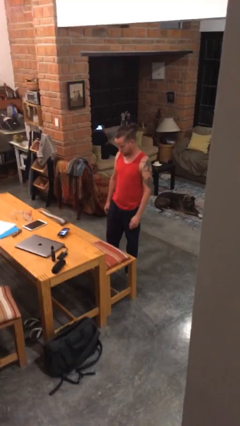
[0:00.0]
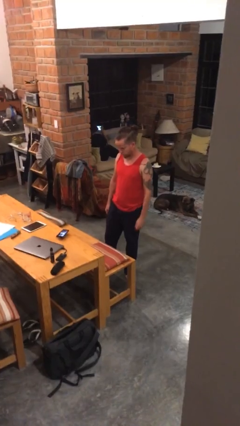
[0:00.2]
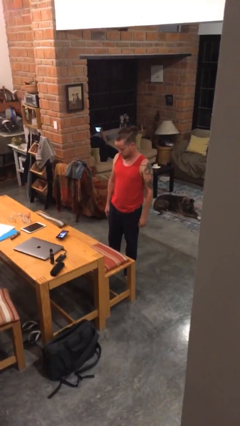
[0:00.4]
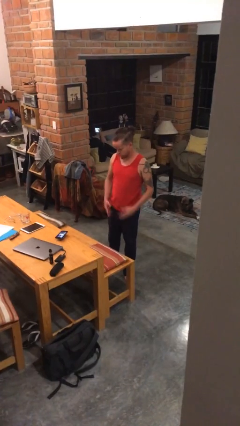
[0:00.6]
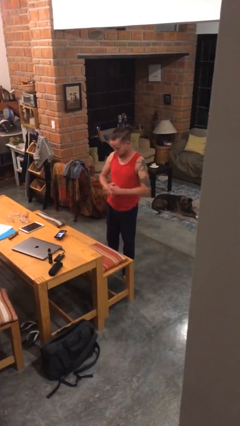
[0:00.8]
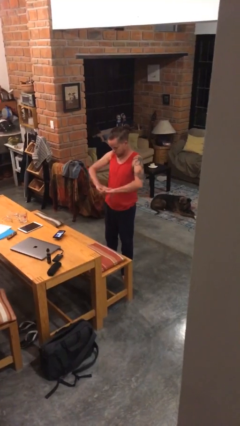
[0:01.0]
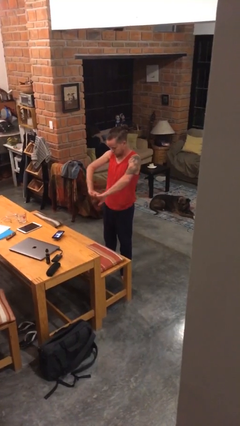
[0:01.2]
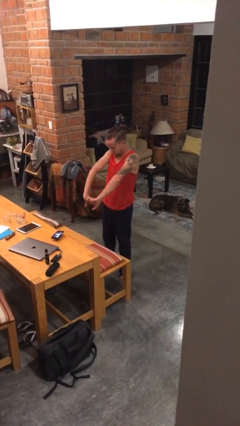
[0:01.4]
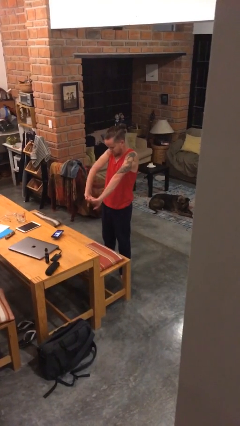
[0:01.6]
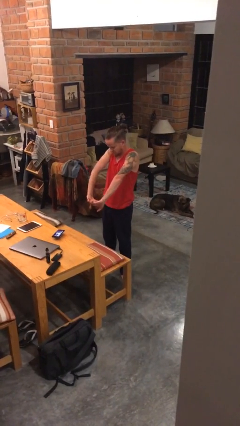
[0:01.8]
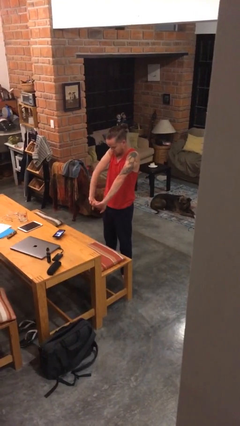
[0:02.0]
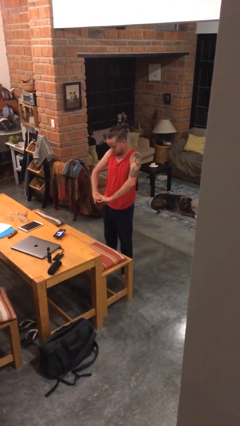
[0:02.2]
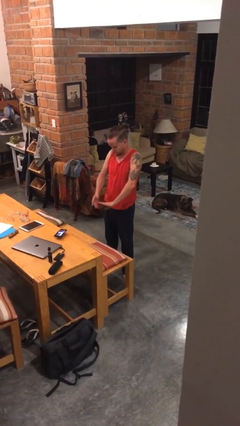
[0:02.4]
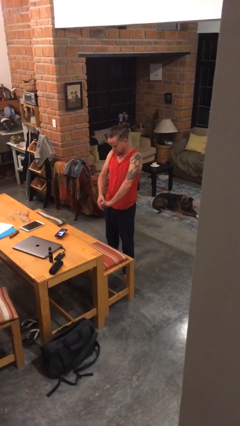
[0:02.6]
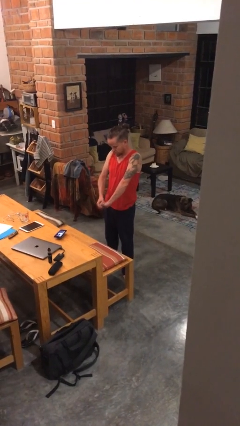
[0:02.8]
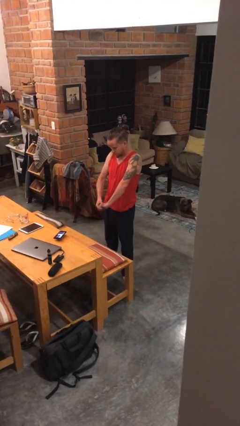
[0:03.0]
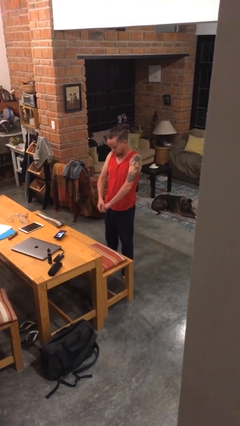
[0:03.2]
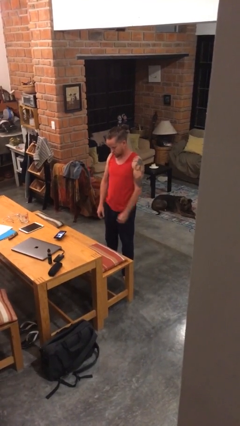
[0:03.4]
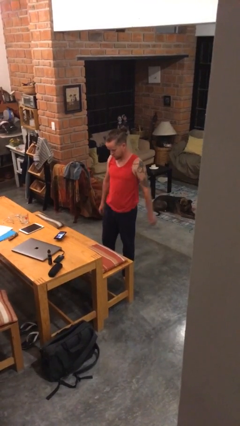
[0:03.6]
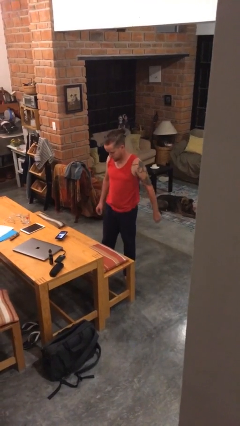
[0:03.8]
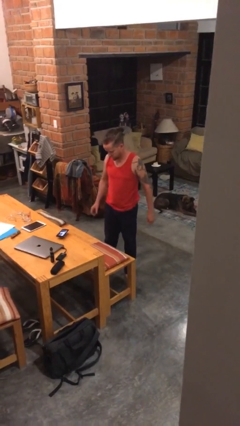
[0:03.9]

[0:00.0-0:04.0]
person cracks knuckles

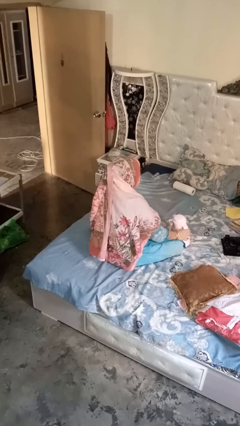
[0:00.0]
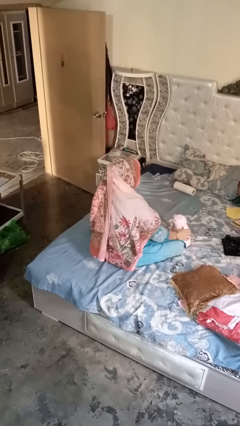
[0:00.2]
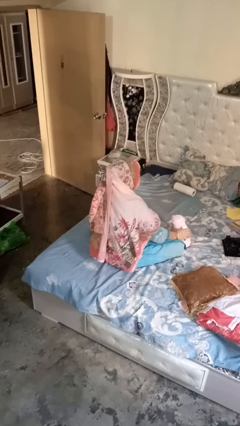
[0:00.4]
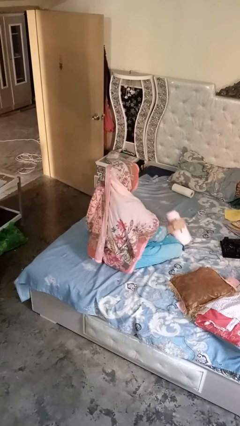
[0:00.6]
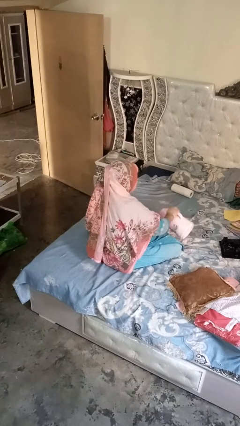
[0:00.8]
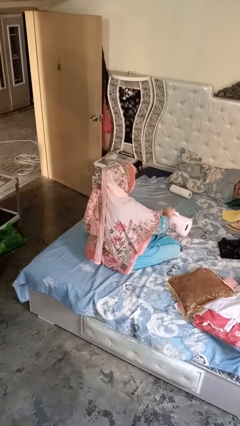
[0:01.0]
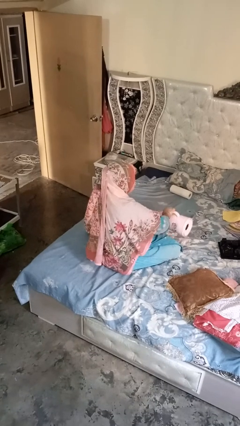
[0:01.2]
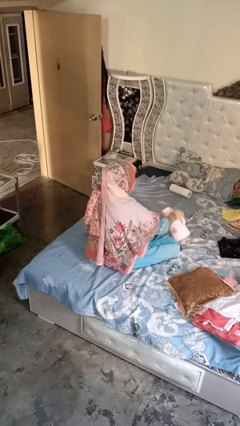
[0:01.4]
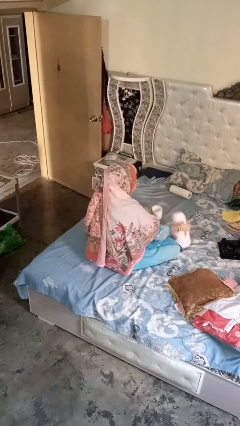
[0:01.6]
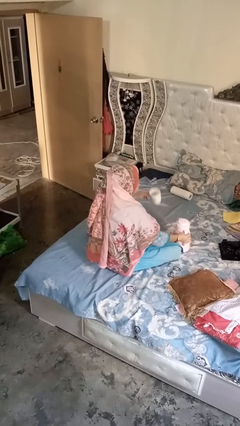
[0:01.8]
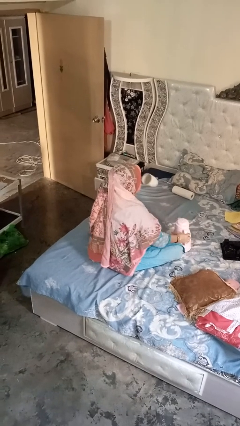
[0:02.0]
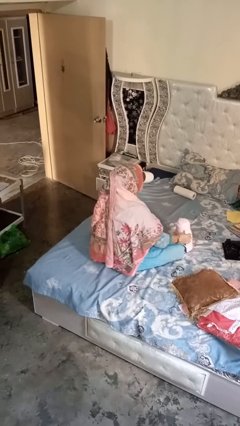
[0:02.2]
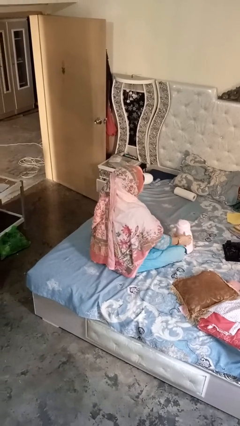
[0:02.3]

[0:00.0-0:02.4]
person pours coffee into mug

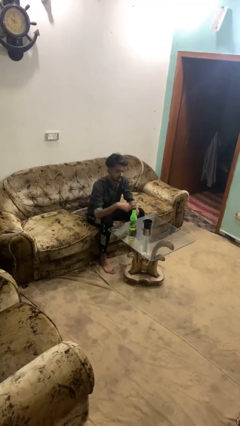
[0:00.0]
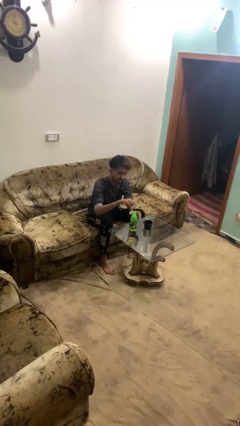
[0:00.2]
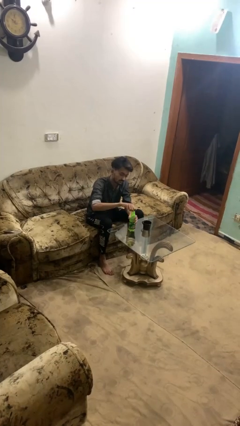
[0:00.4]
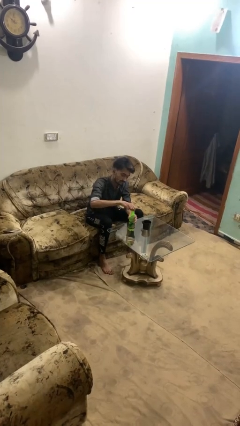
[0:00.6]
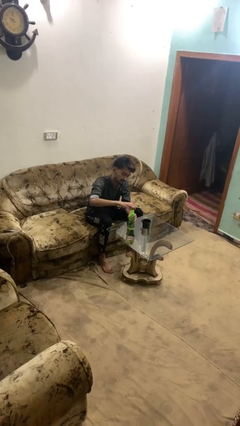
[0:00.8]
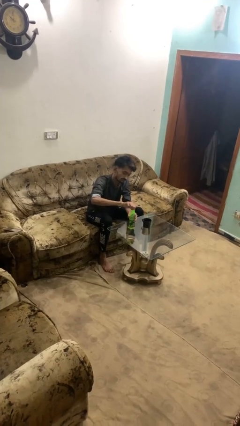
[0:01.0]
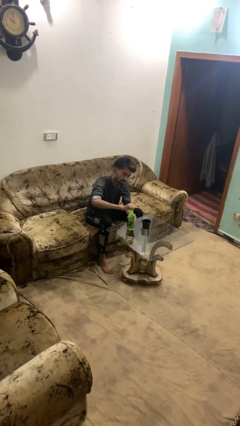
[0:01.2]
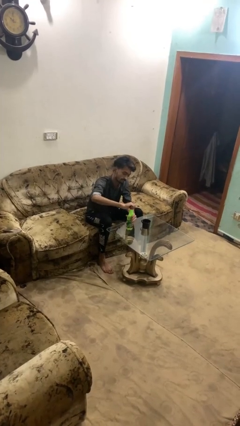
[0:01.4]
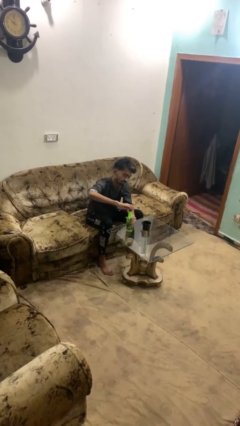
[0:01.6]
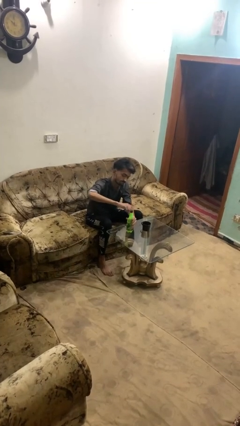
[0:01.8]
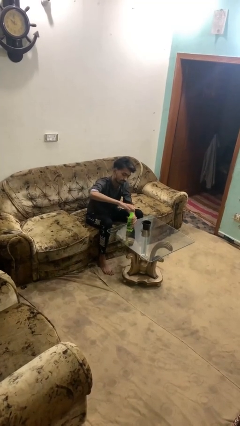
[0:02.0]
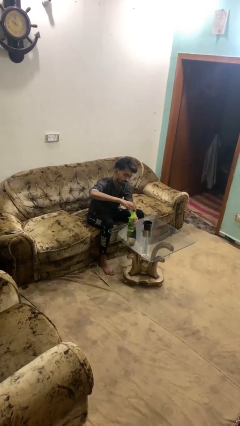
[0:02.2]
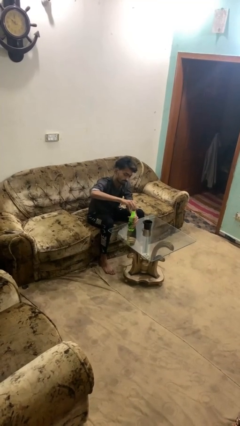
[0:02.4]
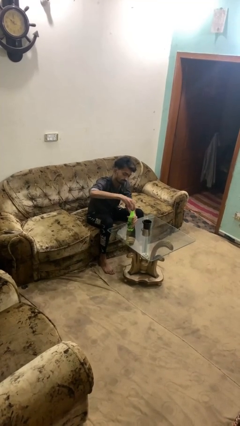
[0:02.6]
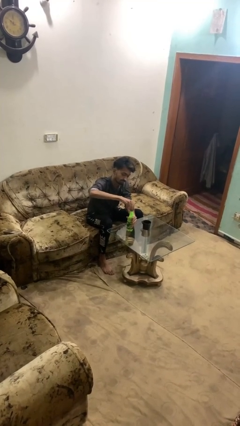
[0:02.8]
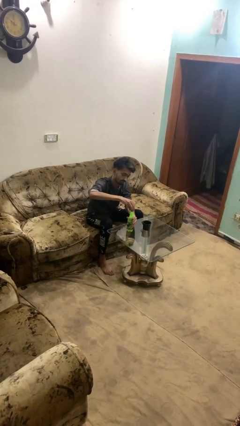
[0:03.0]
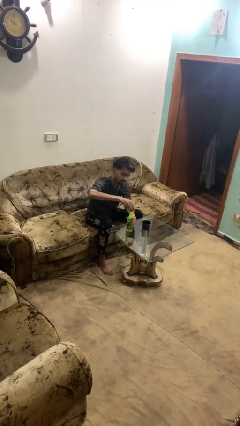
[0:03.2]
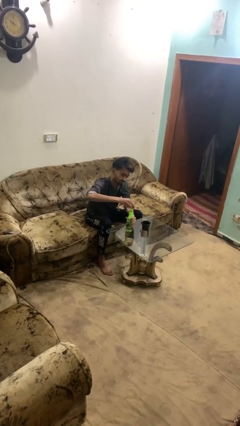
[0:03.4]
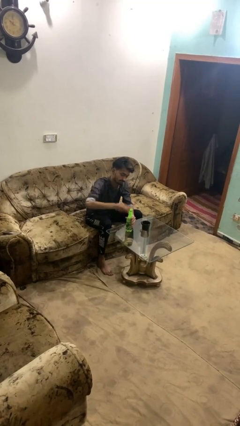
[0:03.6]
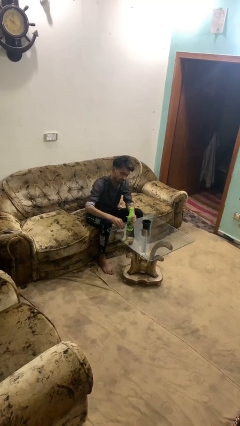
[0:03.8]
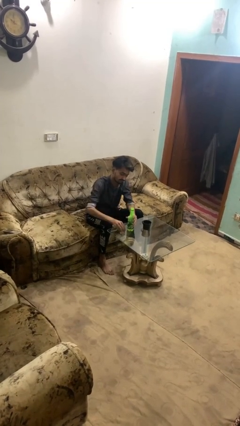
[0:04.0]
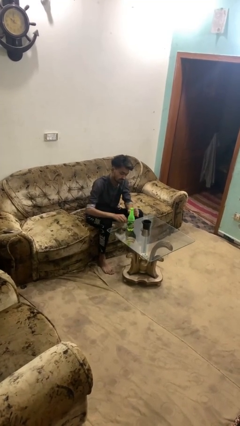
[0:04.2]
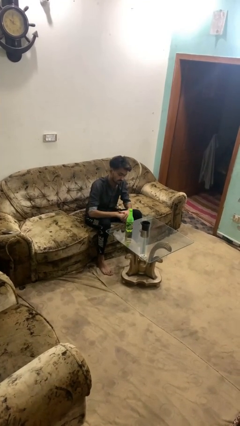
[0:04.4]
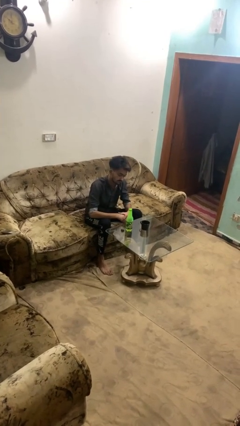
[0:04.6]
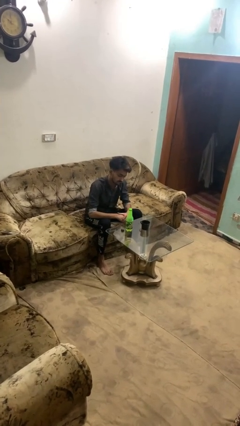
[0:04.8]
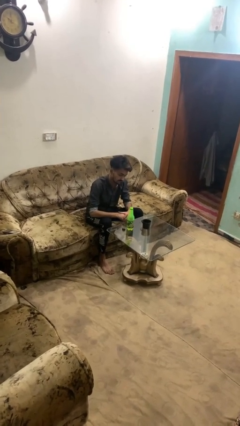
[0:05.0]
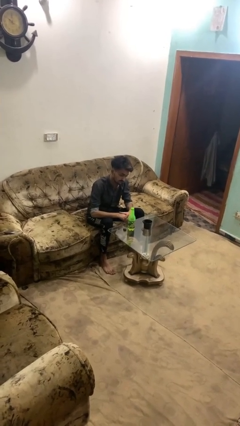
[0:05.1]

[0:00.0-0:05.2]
person unscrews lid from bottle

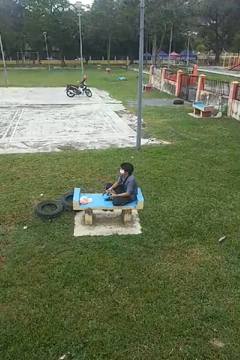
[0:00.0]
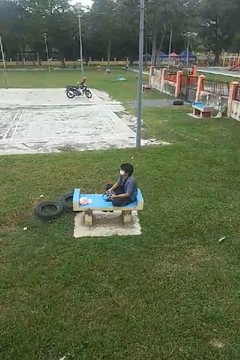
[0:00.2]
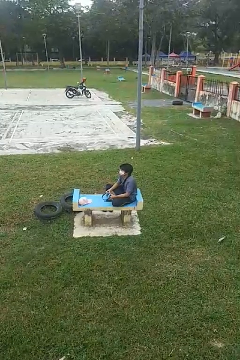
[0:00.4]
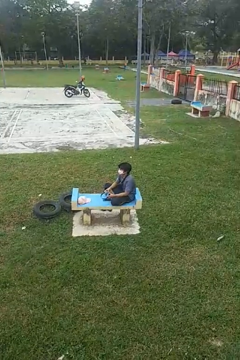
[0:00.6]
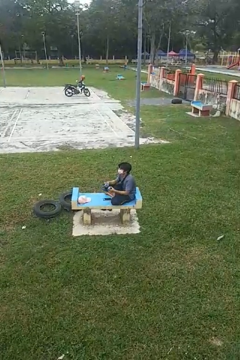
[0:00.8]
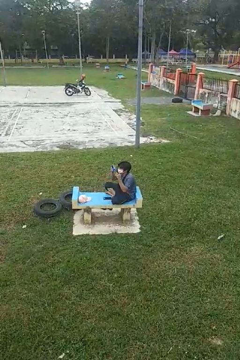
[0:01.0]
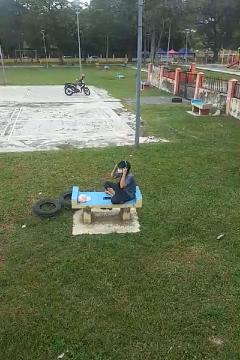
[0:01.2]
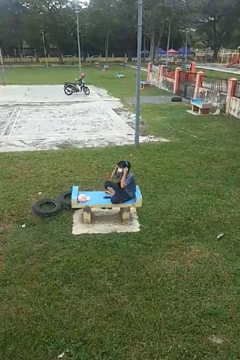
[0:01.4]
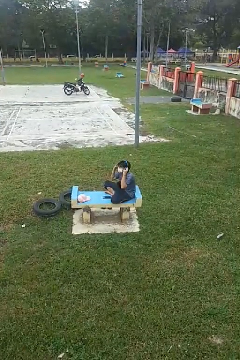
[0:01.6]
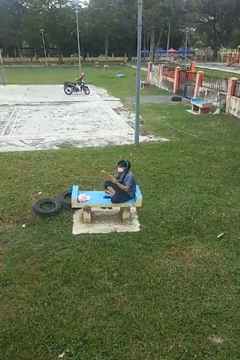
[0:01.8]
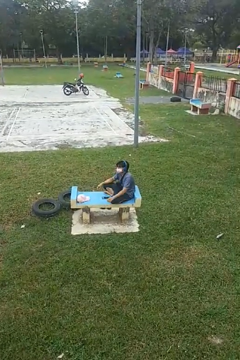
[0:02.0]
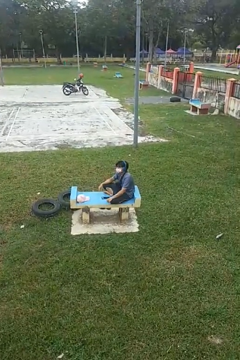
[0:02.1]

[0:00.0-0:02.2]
person puts on headphones

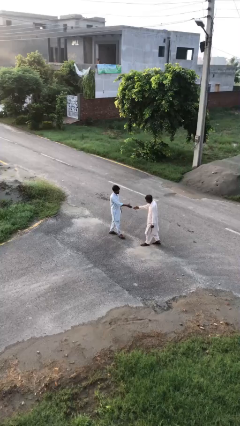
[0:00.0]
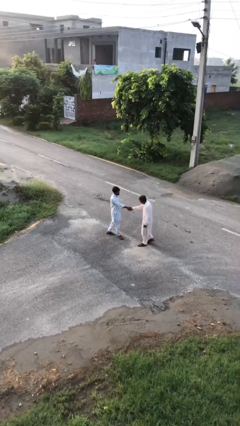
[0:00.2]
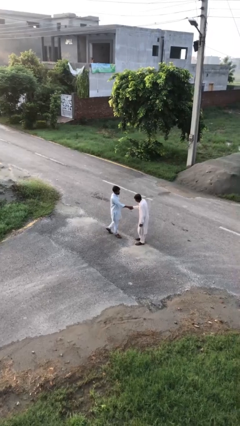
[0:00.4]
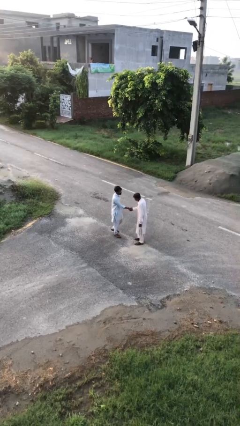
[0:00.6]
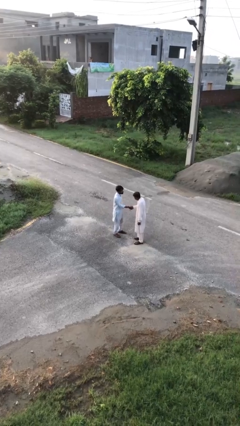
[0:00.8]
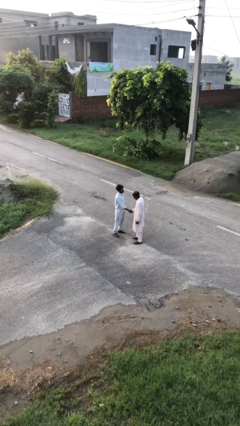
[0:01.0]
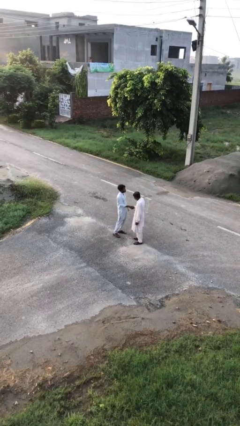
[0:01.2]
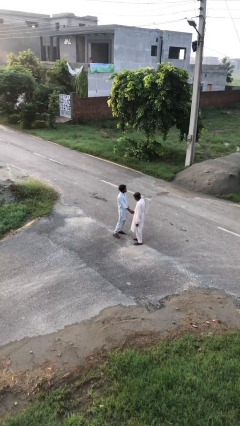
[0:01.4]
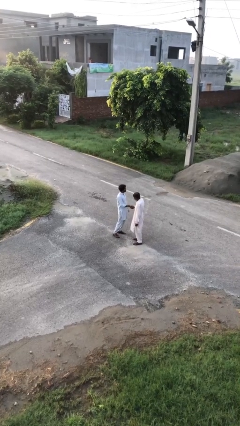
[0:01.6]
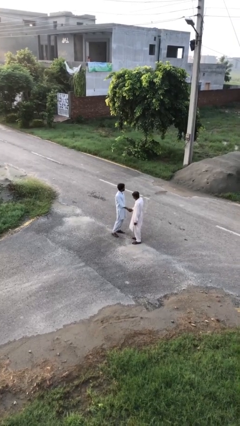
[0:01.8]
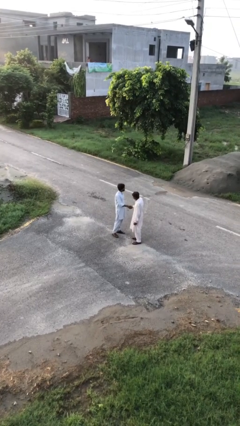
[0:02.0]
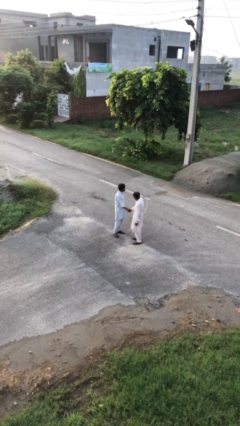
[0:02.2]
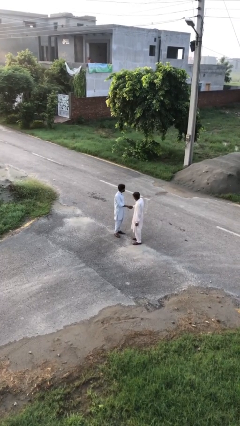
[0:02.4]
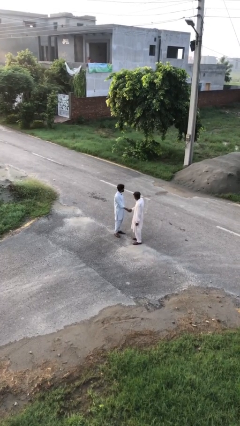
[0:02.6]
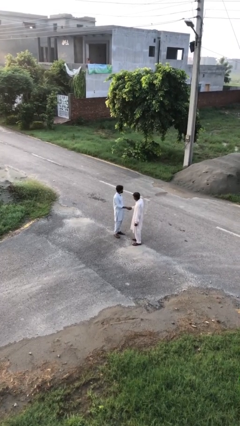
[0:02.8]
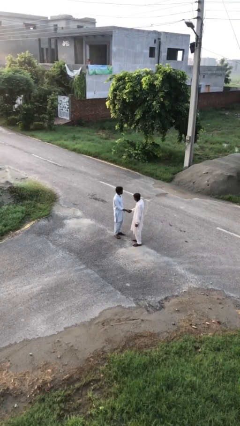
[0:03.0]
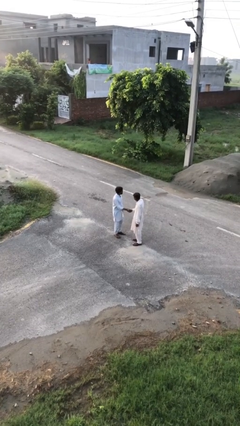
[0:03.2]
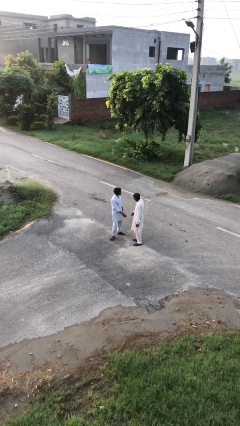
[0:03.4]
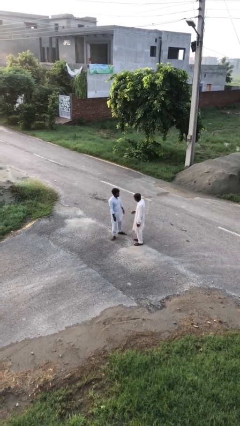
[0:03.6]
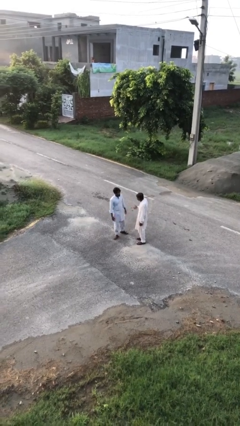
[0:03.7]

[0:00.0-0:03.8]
person shakes hand

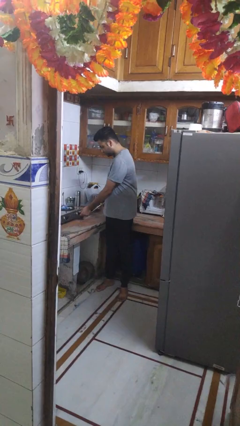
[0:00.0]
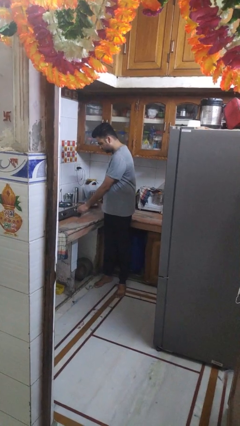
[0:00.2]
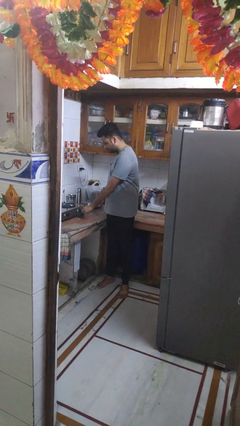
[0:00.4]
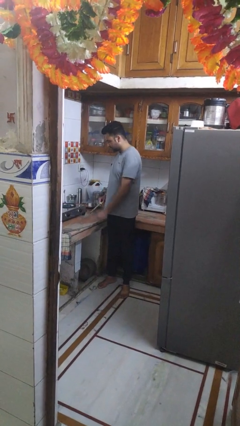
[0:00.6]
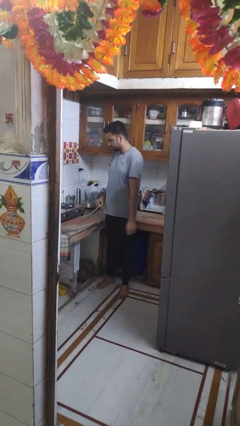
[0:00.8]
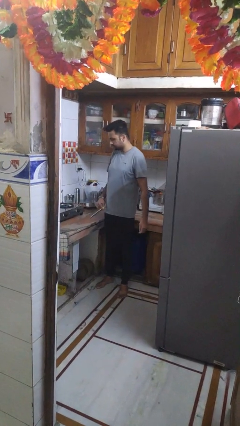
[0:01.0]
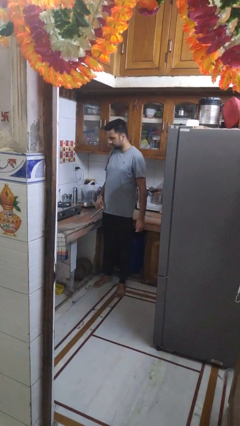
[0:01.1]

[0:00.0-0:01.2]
person turns off stovetop
